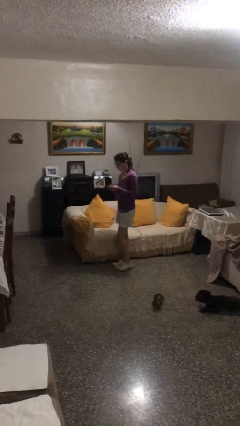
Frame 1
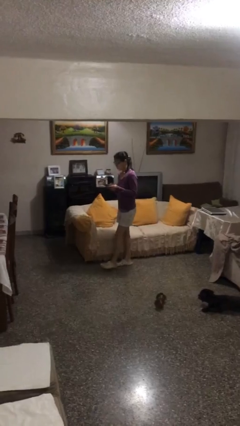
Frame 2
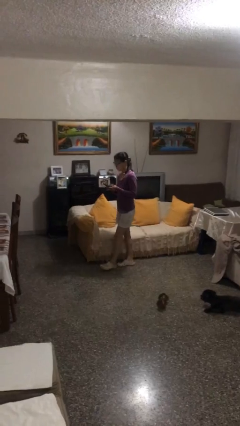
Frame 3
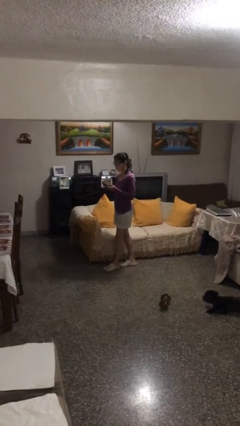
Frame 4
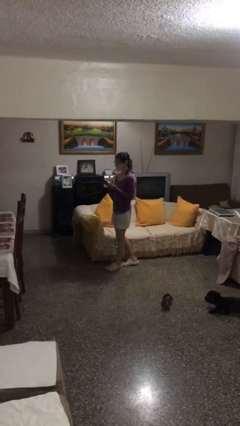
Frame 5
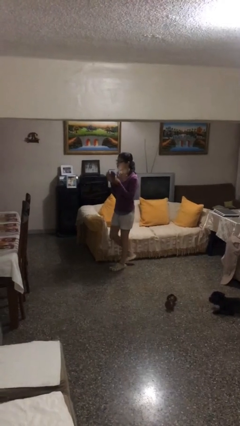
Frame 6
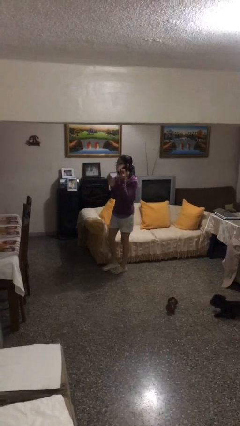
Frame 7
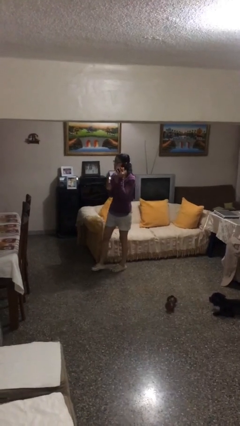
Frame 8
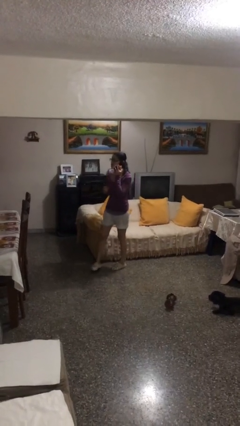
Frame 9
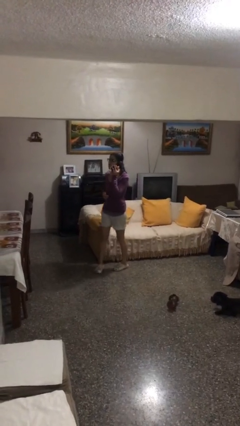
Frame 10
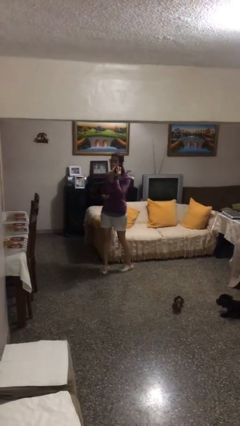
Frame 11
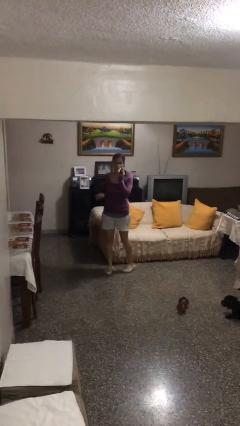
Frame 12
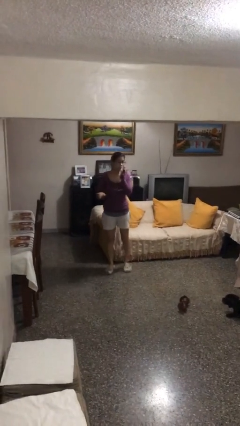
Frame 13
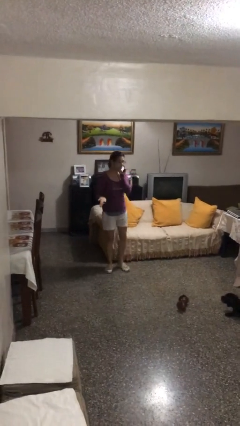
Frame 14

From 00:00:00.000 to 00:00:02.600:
person talks on phone

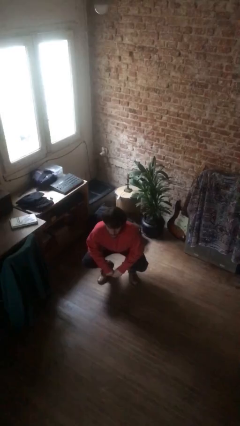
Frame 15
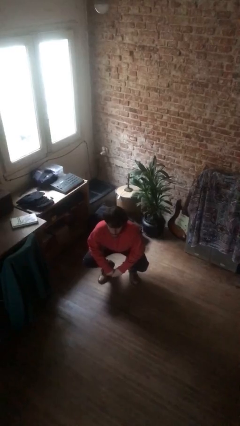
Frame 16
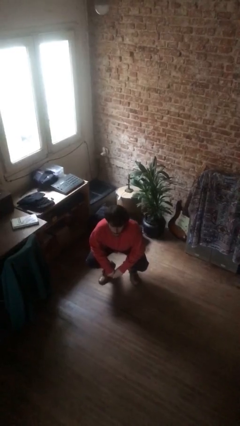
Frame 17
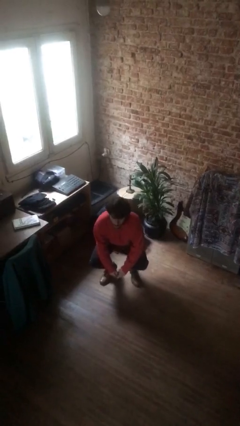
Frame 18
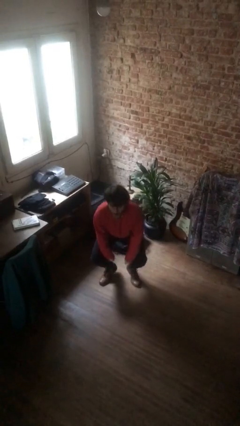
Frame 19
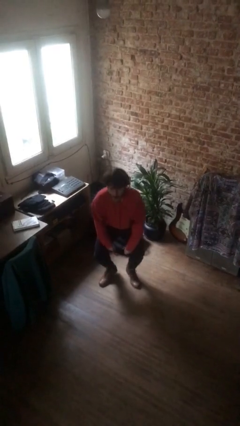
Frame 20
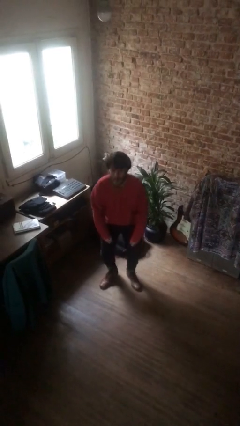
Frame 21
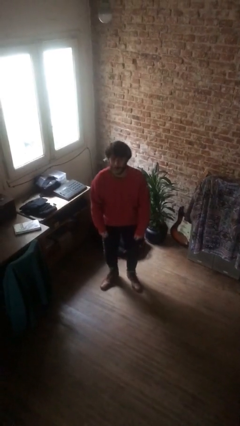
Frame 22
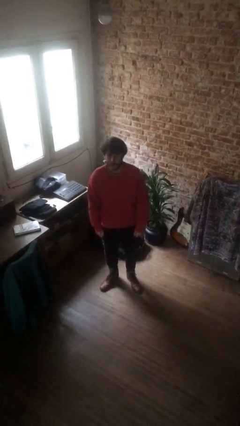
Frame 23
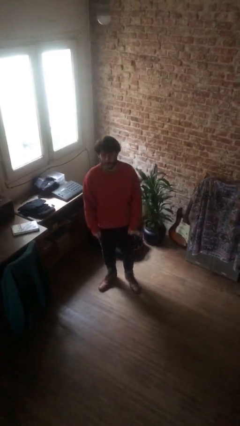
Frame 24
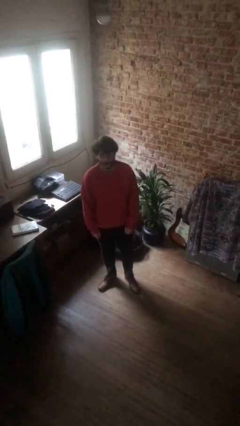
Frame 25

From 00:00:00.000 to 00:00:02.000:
person stands up

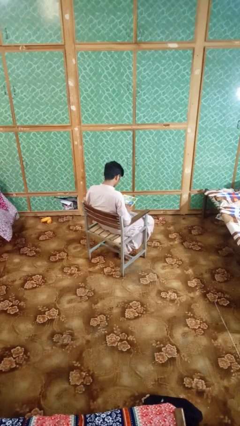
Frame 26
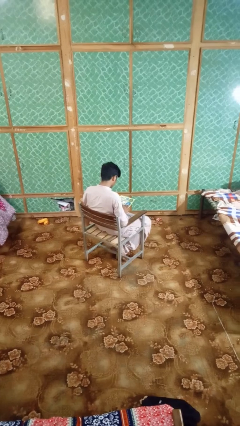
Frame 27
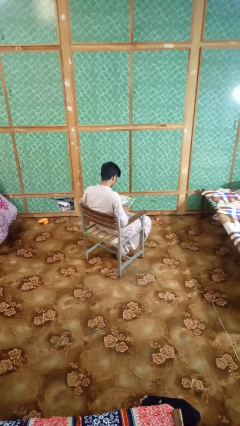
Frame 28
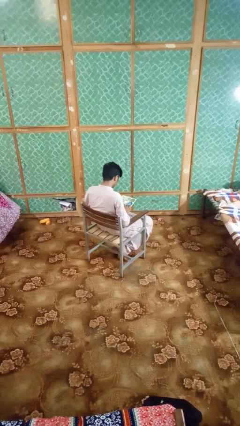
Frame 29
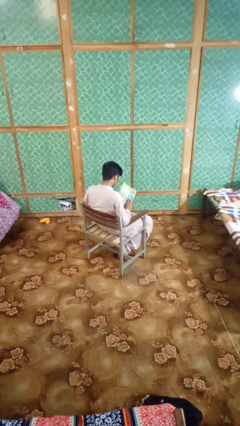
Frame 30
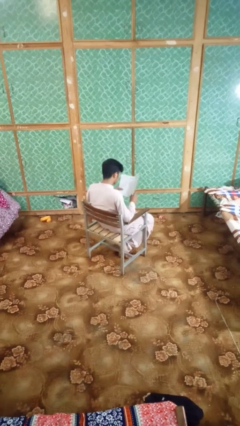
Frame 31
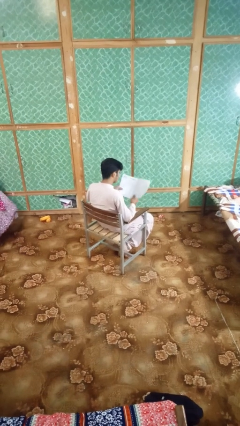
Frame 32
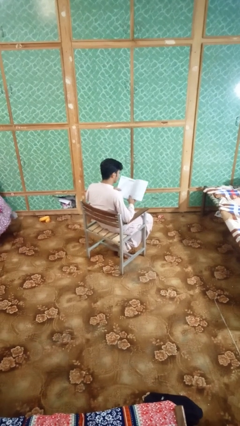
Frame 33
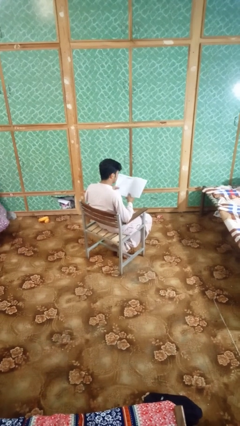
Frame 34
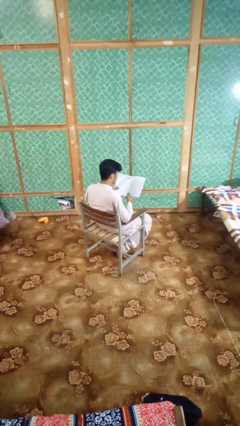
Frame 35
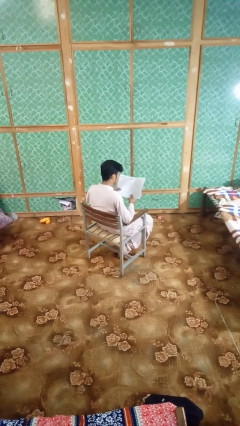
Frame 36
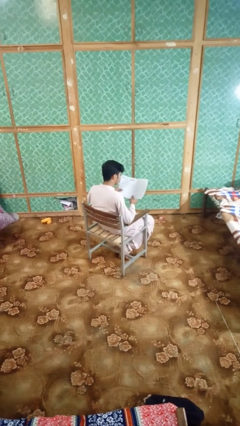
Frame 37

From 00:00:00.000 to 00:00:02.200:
person reads magazine

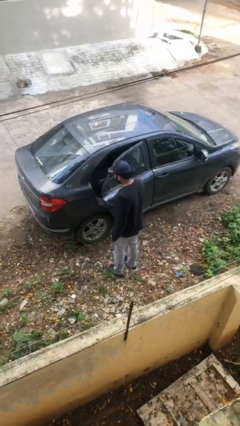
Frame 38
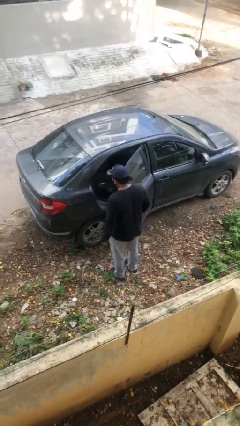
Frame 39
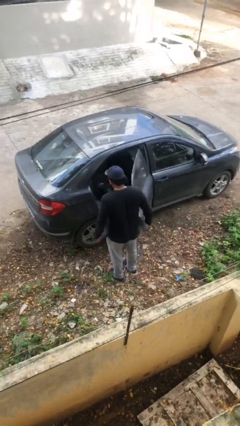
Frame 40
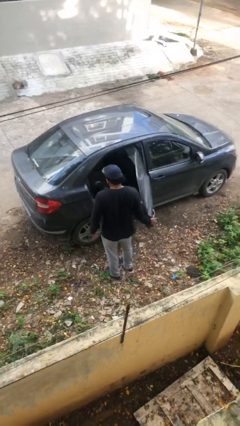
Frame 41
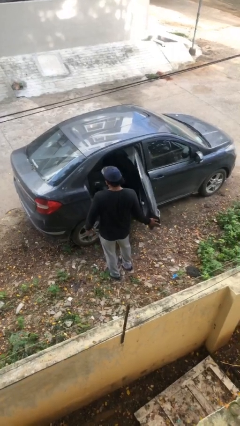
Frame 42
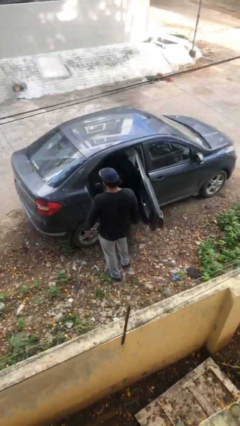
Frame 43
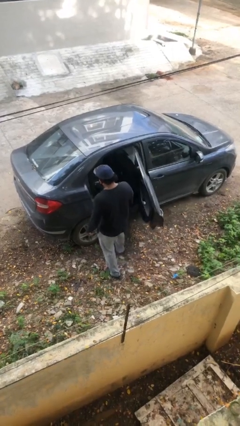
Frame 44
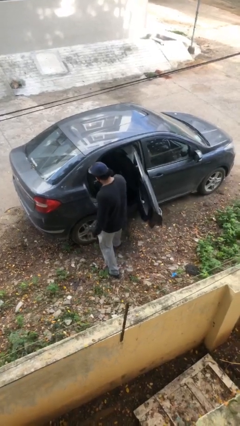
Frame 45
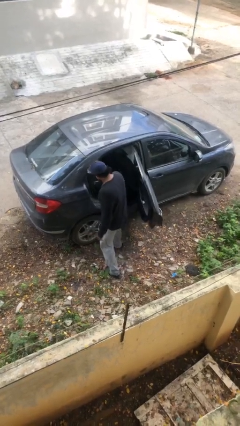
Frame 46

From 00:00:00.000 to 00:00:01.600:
person opens car door

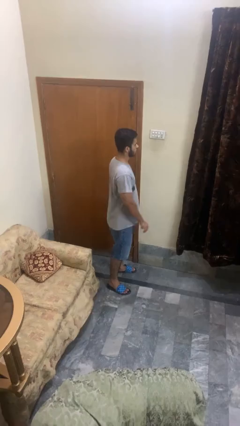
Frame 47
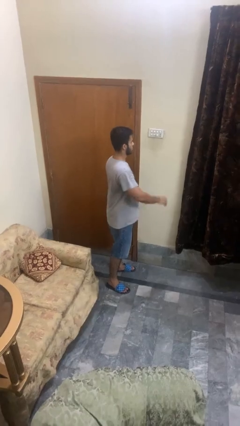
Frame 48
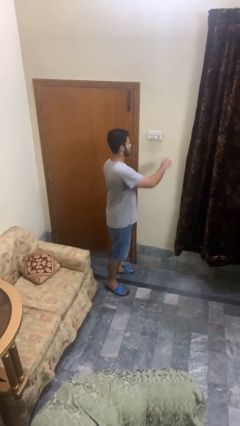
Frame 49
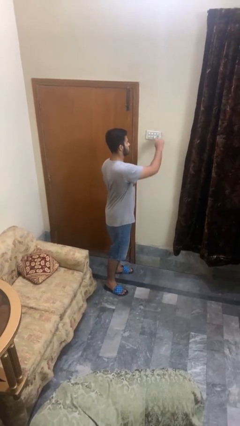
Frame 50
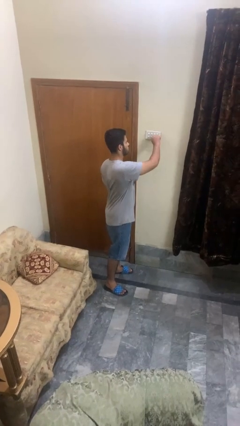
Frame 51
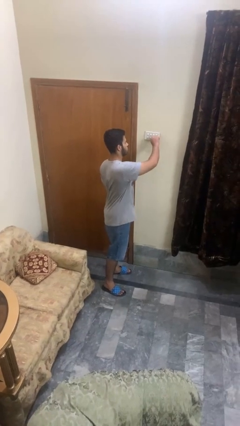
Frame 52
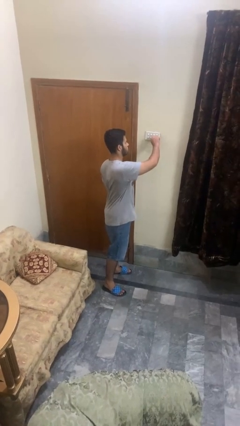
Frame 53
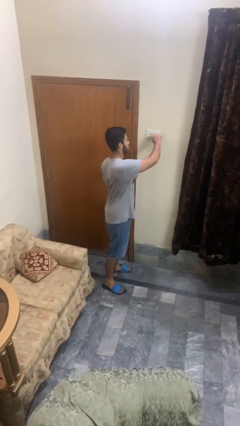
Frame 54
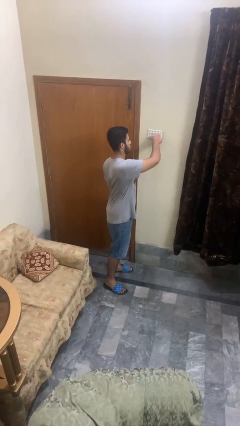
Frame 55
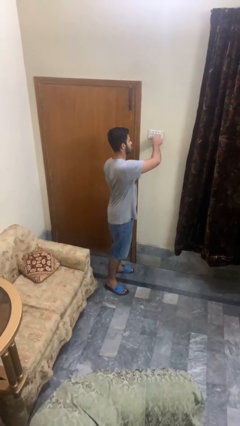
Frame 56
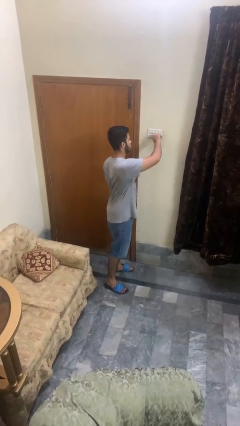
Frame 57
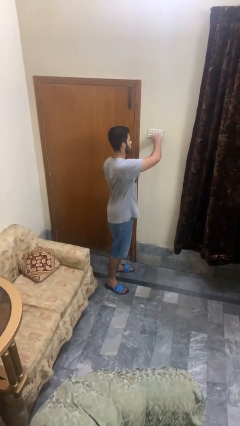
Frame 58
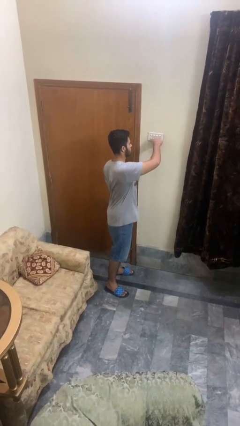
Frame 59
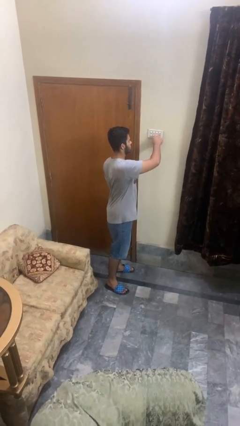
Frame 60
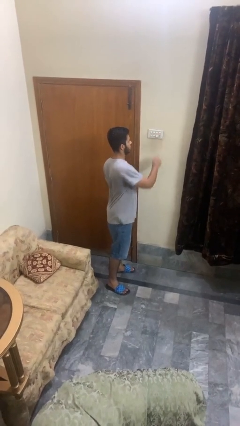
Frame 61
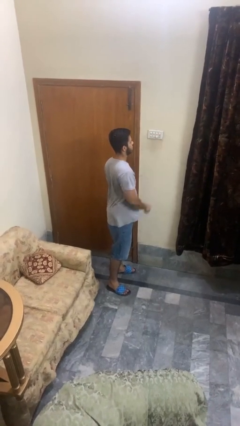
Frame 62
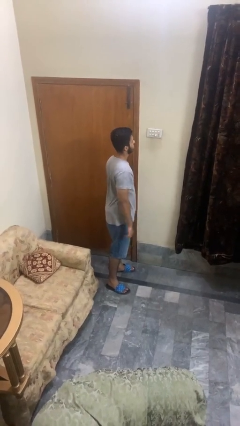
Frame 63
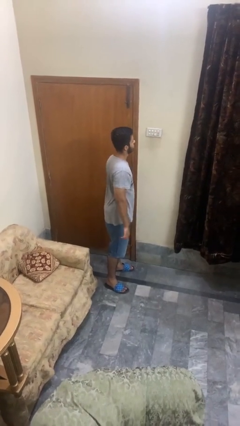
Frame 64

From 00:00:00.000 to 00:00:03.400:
person adjusts thermostat

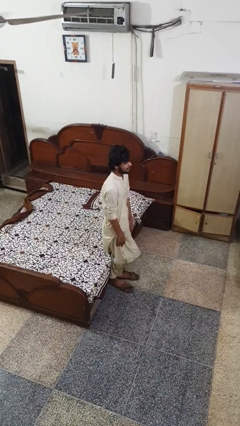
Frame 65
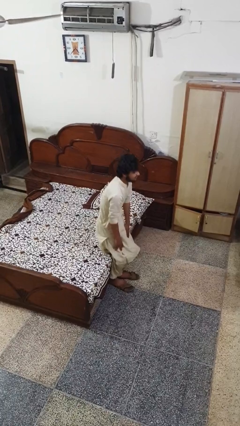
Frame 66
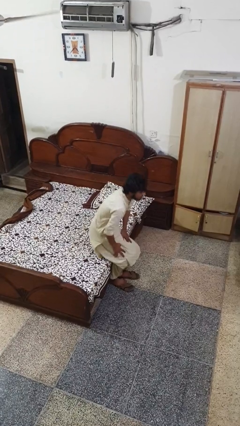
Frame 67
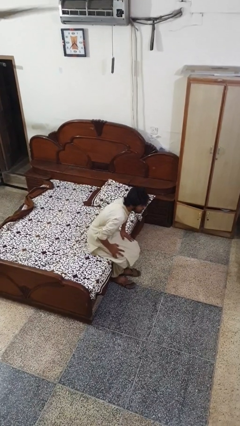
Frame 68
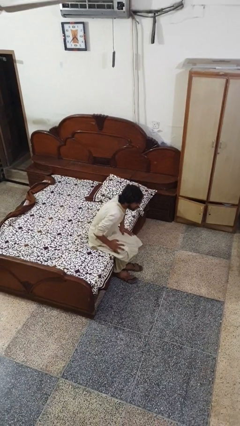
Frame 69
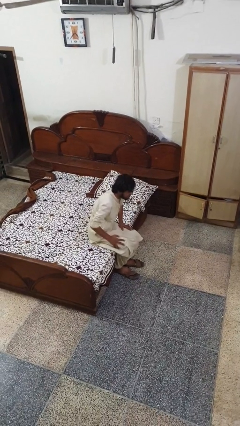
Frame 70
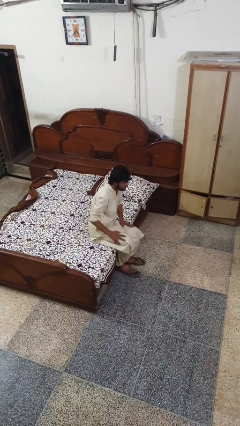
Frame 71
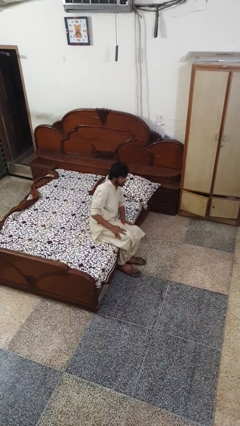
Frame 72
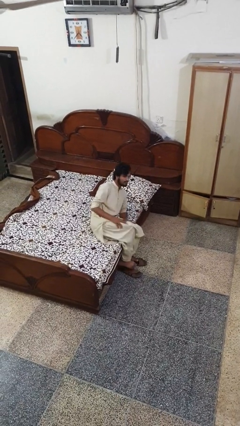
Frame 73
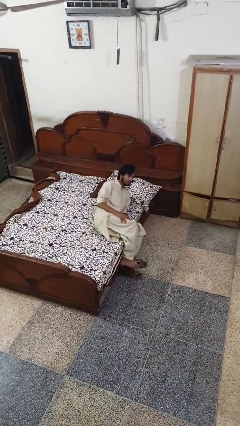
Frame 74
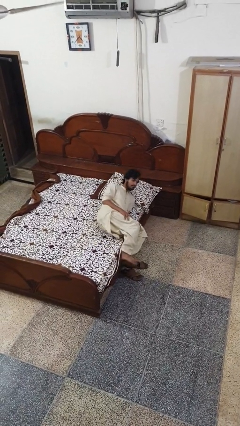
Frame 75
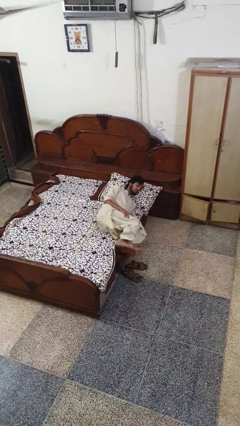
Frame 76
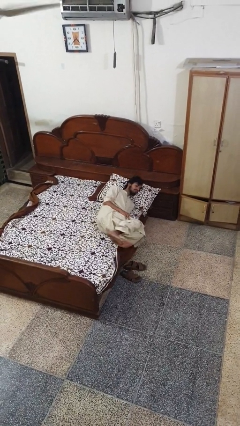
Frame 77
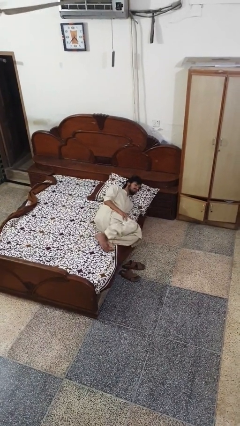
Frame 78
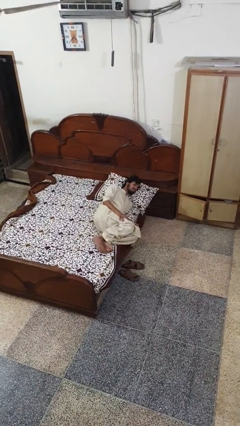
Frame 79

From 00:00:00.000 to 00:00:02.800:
person lies down on bed

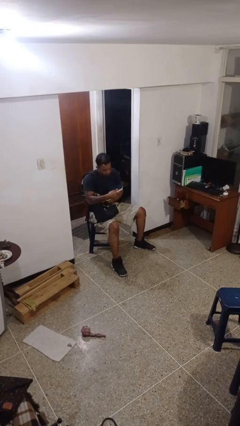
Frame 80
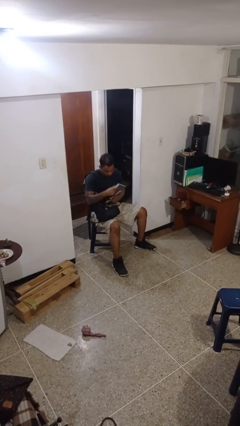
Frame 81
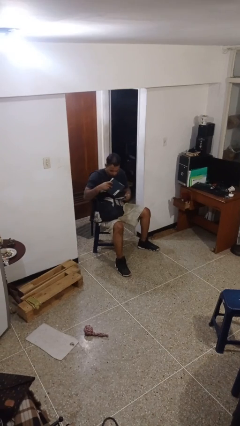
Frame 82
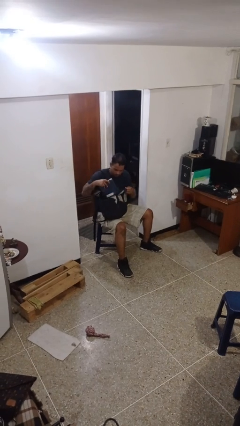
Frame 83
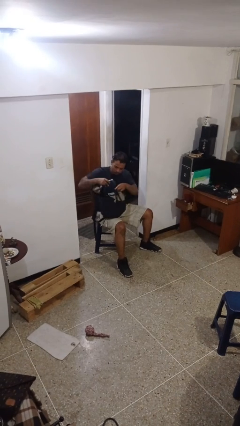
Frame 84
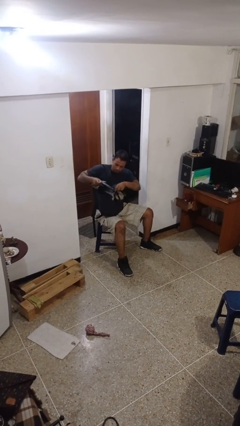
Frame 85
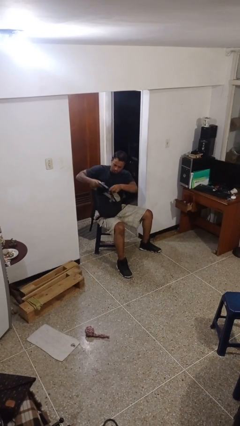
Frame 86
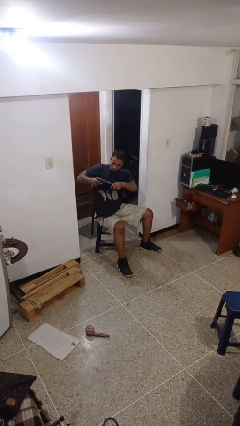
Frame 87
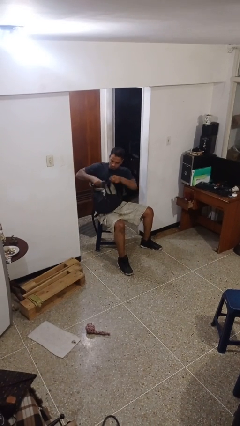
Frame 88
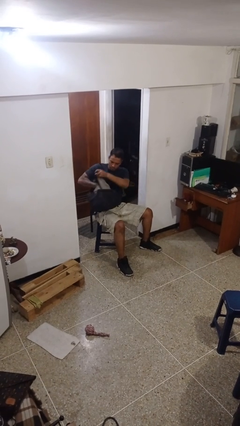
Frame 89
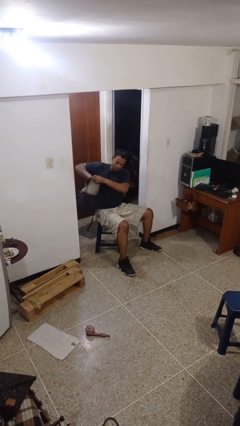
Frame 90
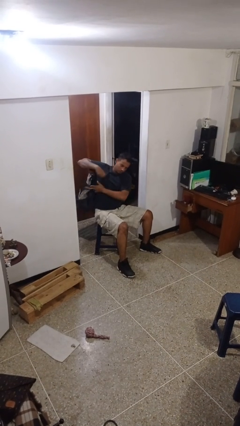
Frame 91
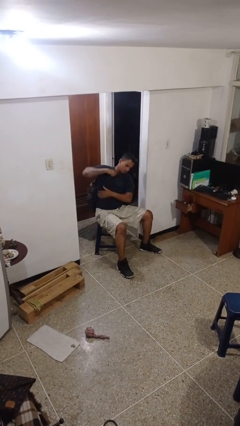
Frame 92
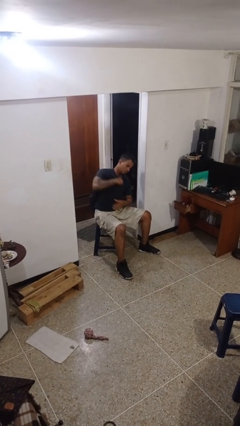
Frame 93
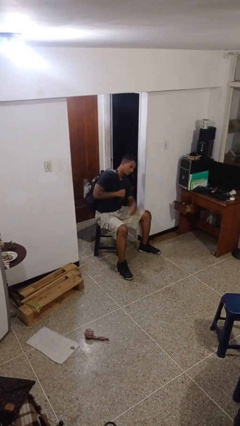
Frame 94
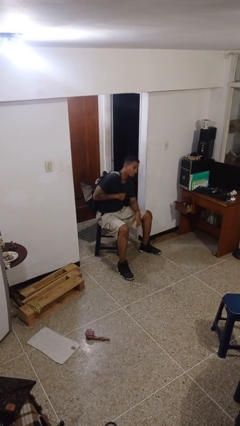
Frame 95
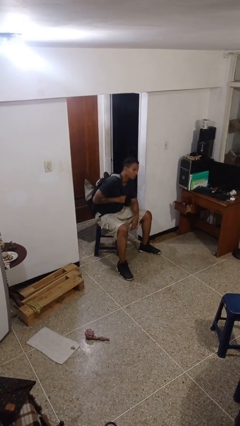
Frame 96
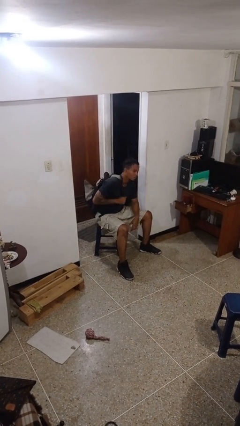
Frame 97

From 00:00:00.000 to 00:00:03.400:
person puts object into backpack
